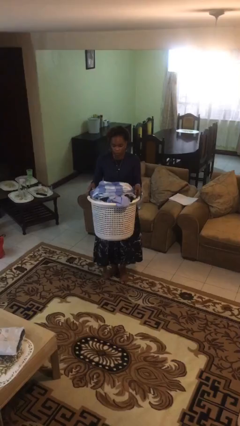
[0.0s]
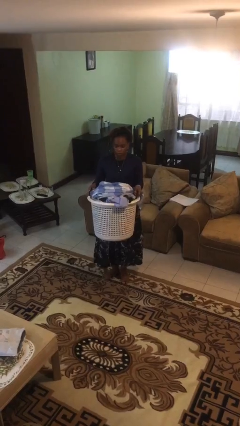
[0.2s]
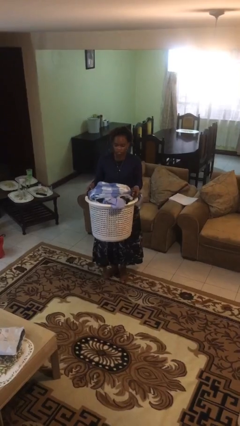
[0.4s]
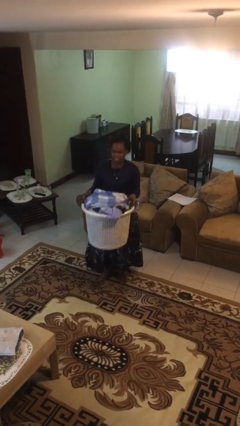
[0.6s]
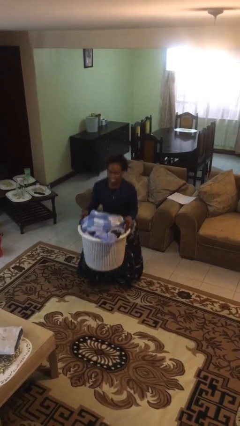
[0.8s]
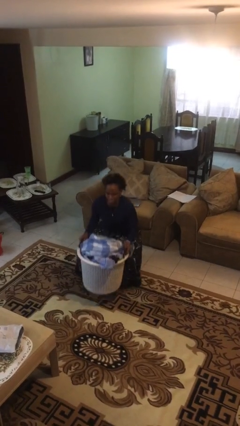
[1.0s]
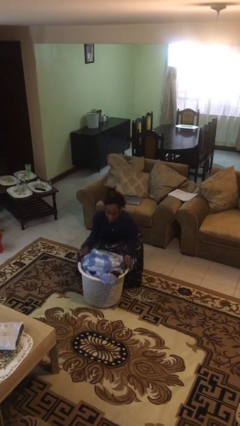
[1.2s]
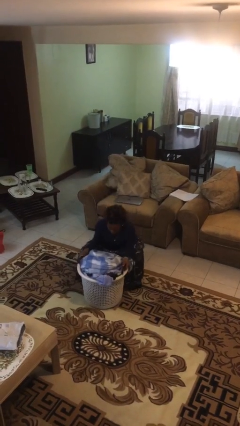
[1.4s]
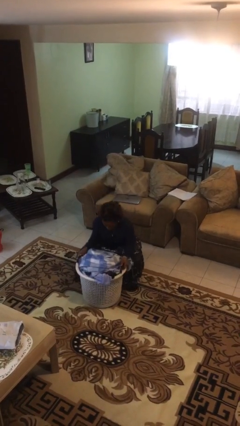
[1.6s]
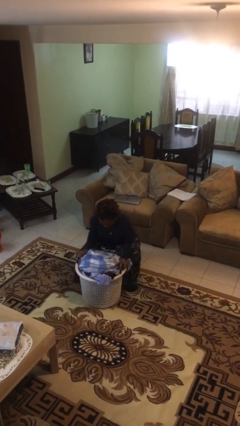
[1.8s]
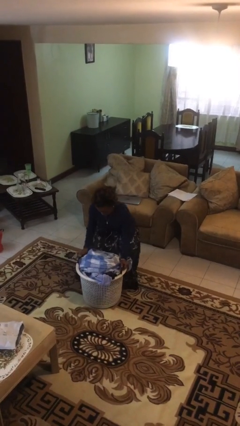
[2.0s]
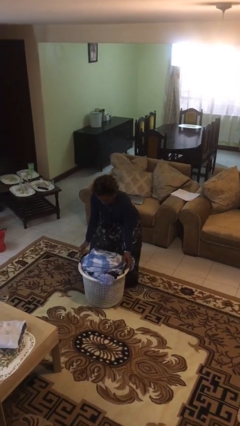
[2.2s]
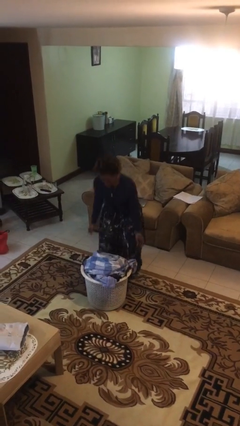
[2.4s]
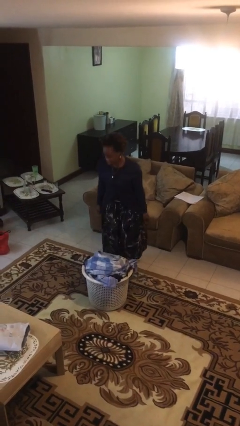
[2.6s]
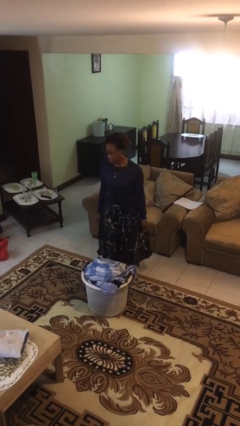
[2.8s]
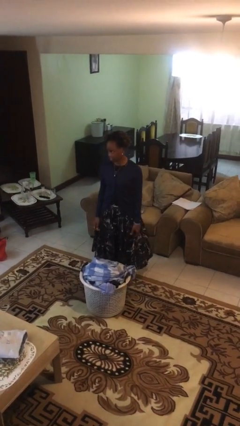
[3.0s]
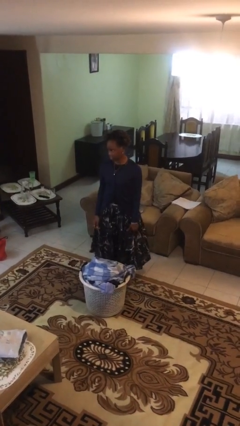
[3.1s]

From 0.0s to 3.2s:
person puts down object on floor

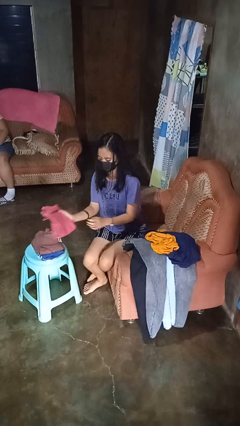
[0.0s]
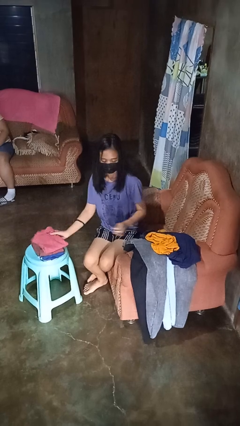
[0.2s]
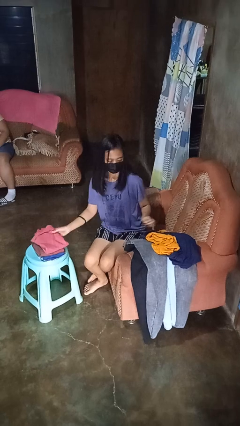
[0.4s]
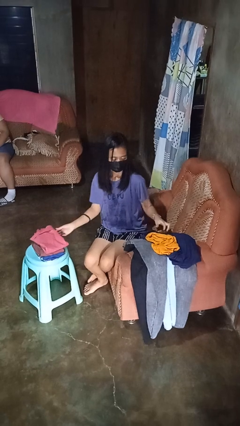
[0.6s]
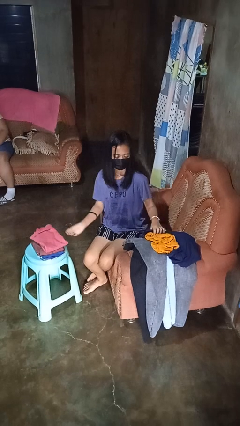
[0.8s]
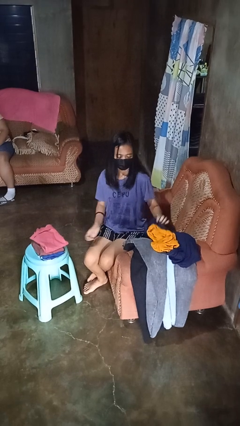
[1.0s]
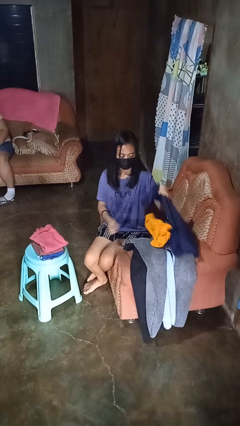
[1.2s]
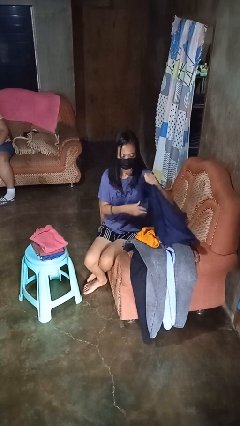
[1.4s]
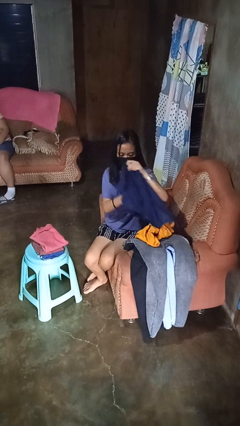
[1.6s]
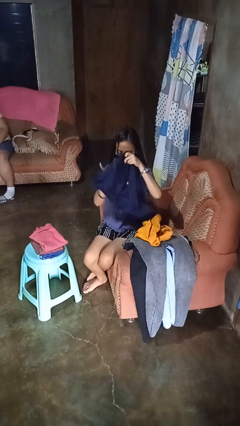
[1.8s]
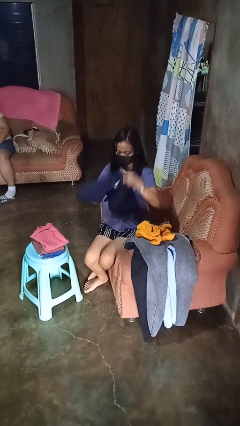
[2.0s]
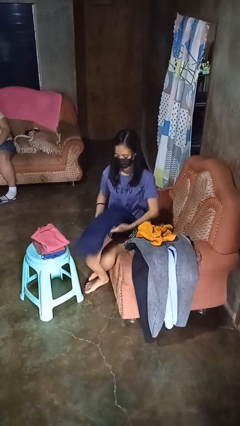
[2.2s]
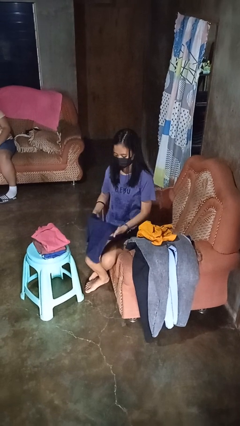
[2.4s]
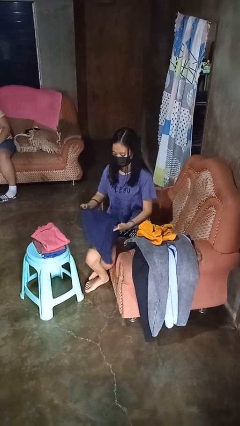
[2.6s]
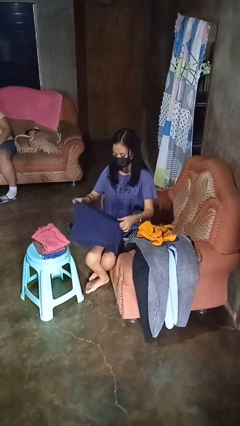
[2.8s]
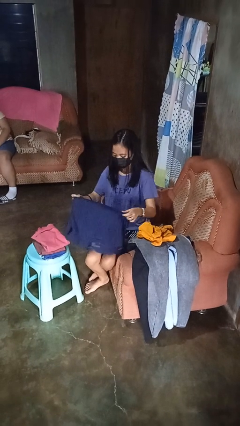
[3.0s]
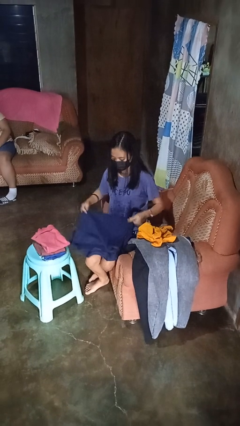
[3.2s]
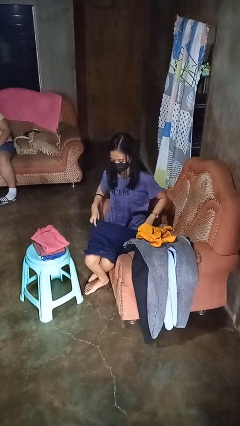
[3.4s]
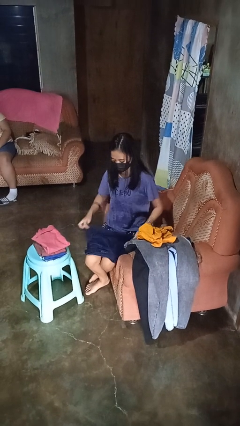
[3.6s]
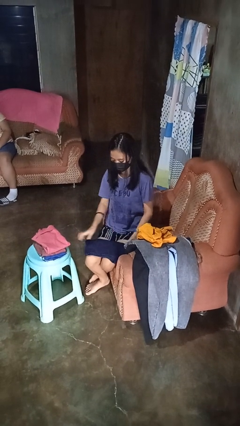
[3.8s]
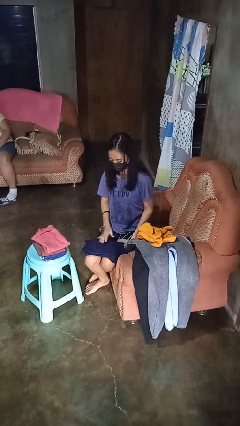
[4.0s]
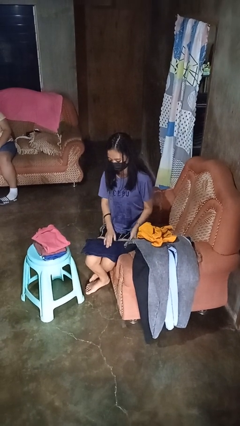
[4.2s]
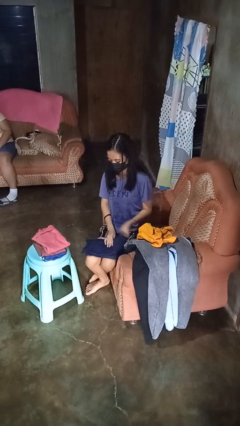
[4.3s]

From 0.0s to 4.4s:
person folds shirt

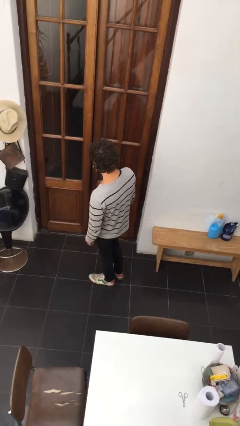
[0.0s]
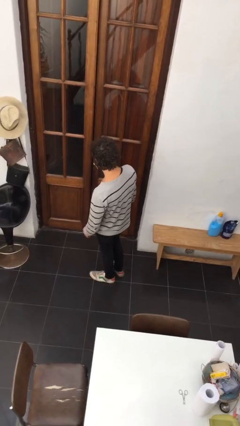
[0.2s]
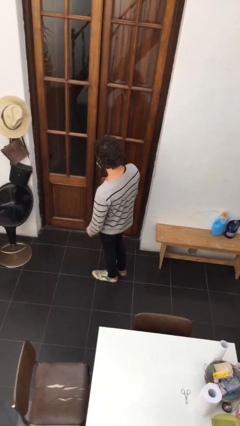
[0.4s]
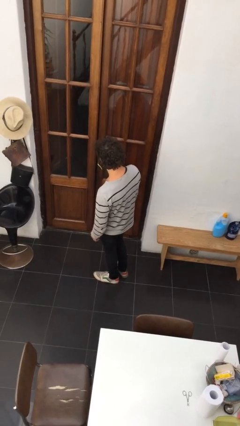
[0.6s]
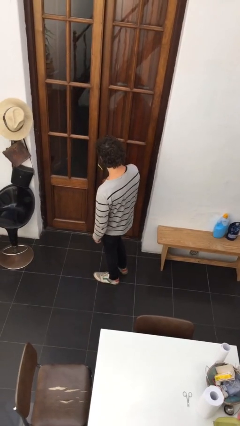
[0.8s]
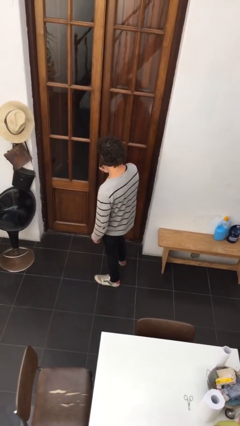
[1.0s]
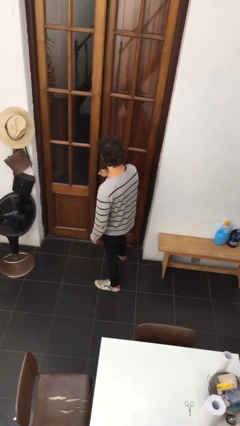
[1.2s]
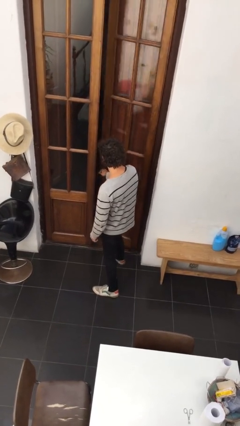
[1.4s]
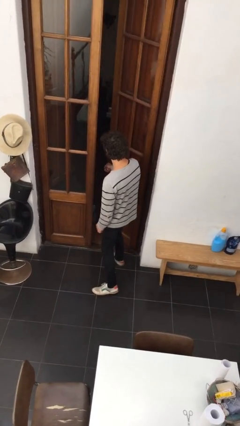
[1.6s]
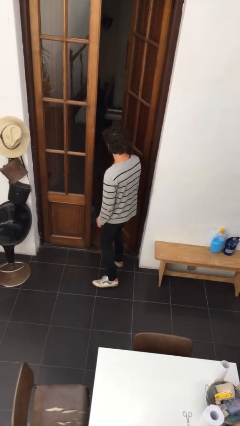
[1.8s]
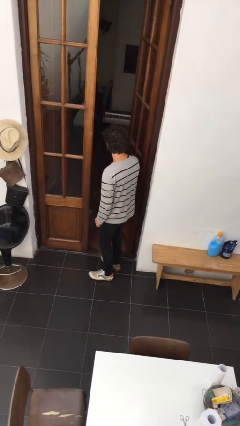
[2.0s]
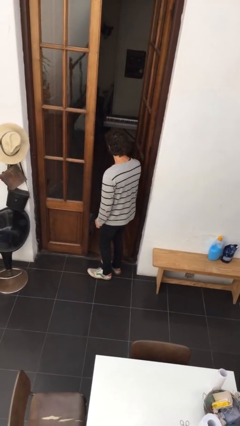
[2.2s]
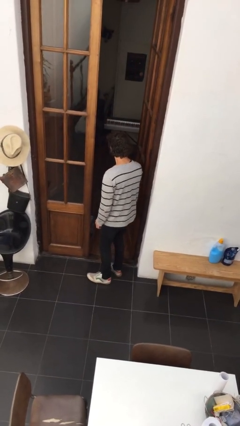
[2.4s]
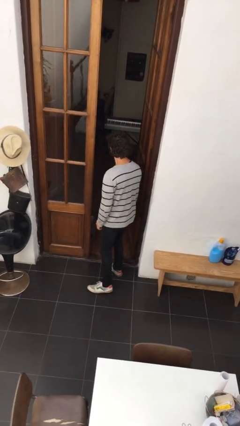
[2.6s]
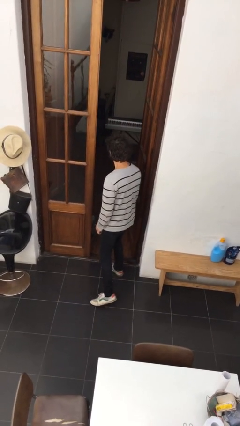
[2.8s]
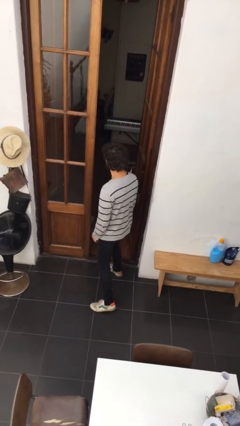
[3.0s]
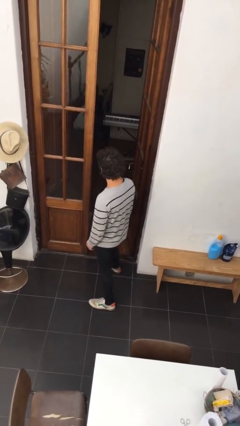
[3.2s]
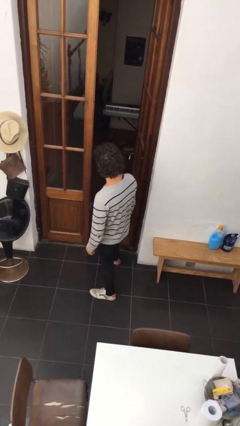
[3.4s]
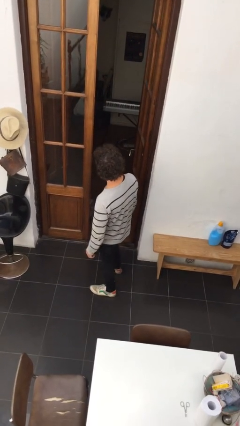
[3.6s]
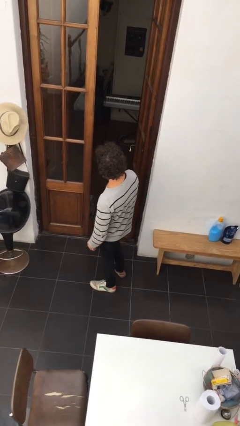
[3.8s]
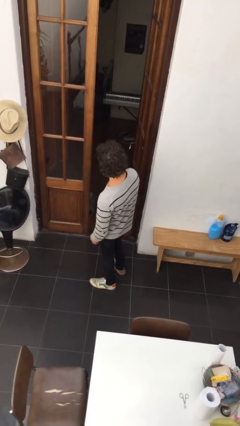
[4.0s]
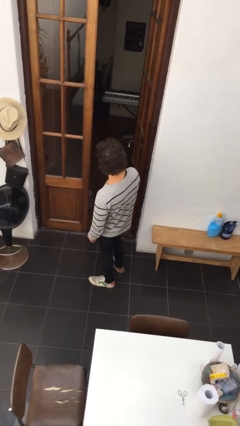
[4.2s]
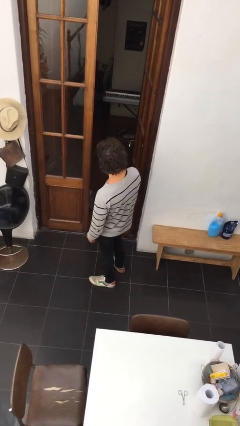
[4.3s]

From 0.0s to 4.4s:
person opens facility door

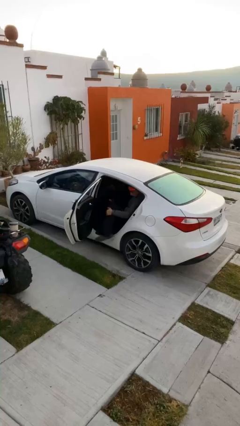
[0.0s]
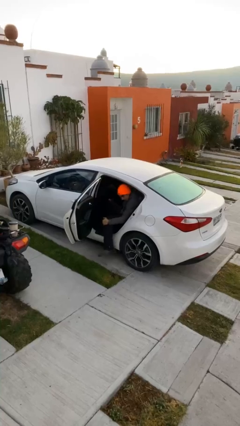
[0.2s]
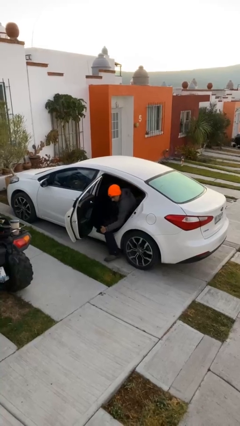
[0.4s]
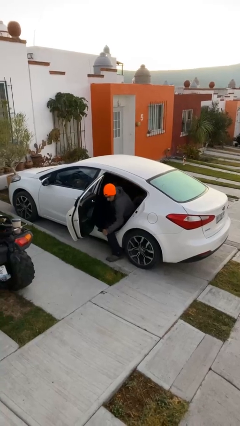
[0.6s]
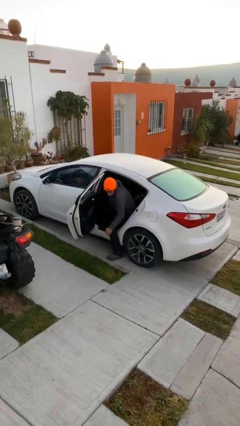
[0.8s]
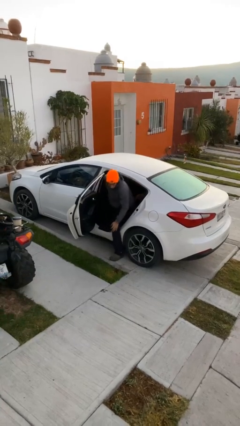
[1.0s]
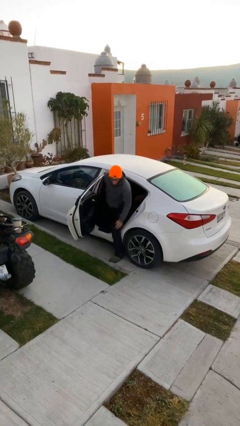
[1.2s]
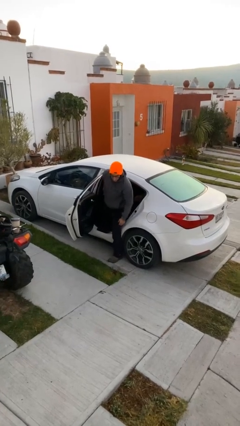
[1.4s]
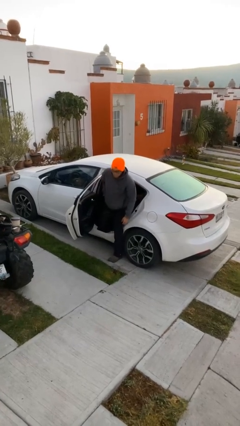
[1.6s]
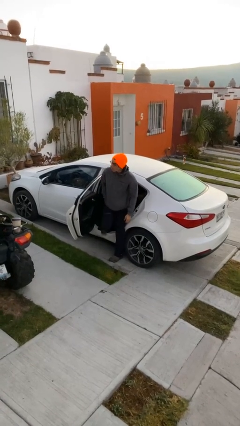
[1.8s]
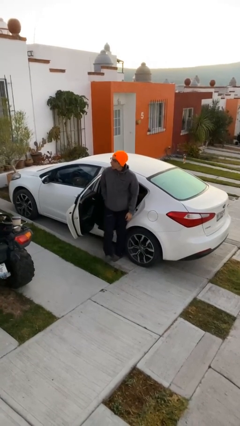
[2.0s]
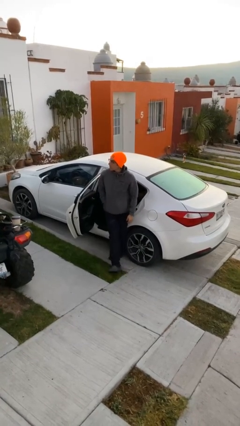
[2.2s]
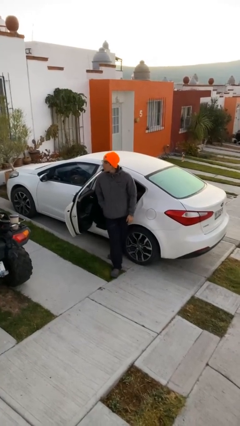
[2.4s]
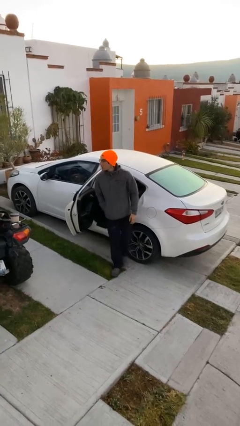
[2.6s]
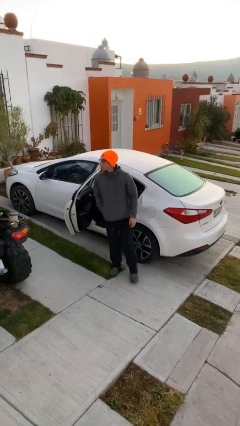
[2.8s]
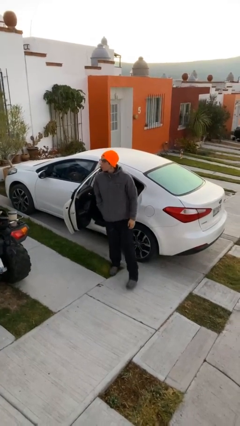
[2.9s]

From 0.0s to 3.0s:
person exits car

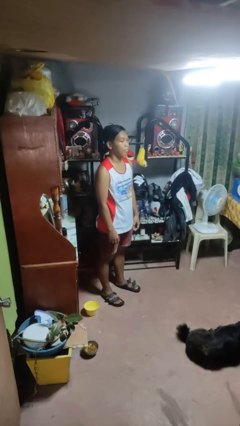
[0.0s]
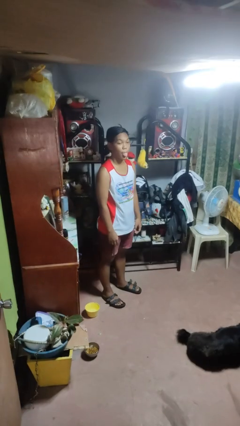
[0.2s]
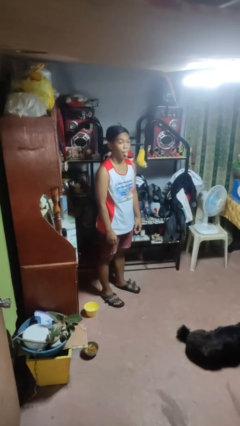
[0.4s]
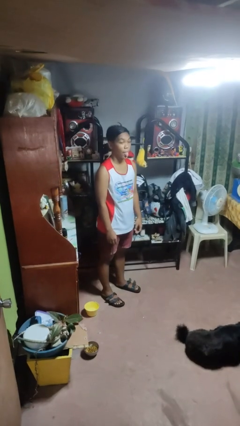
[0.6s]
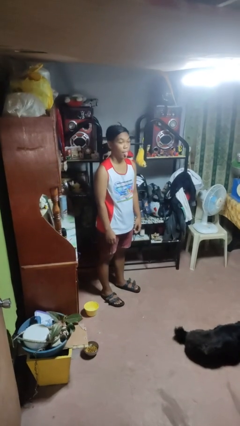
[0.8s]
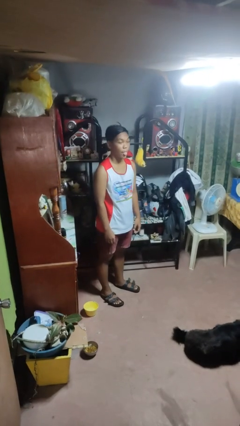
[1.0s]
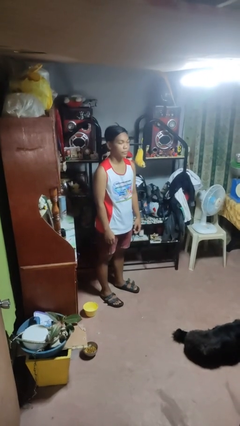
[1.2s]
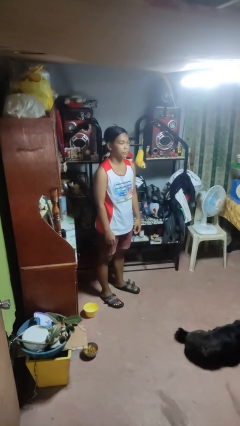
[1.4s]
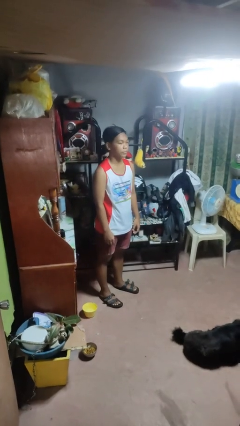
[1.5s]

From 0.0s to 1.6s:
person sticks out tongue

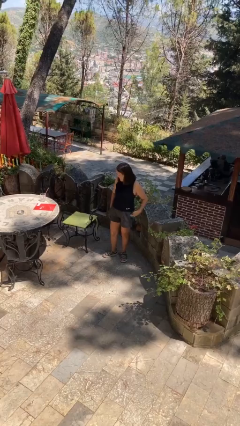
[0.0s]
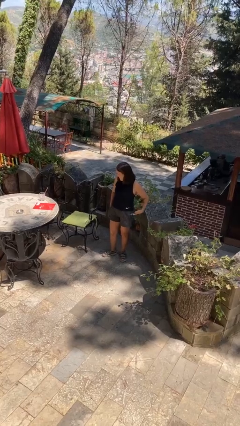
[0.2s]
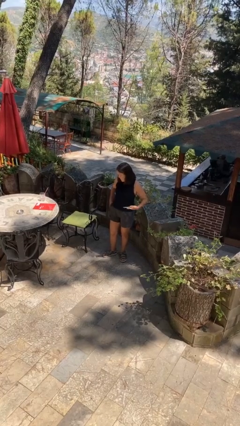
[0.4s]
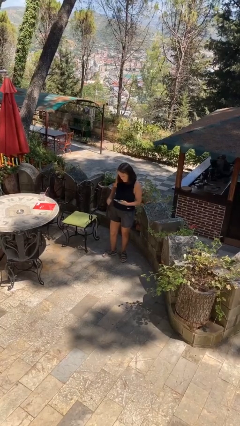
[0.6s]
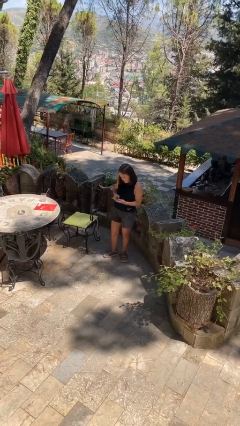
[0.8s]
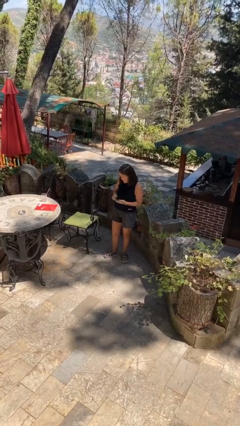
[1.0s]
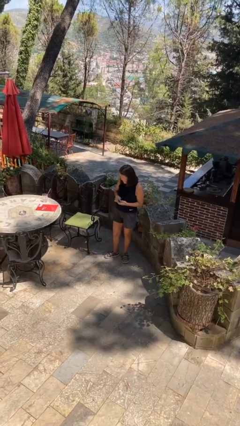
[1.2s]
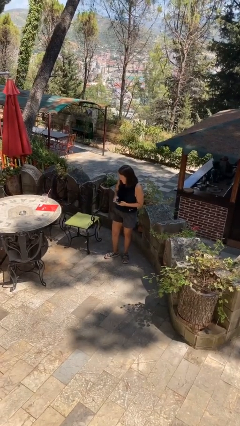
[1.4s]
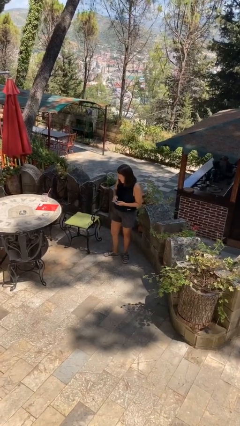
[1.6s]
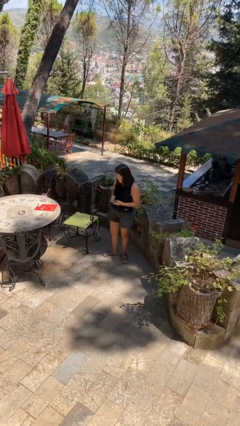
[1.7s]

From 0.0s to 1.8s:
person takes phone from pocket
